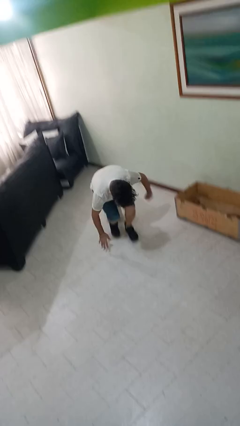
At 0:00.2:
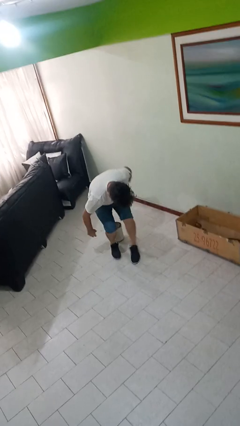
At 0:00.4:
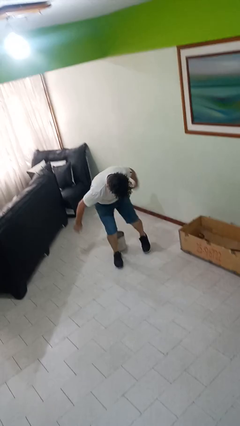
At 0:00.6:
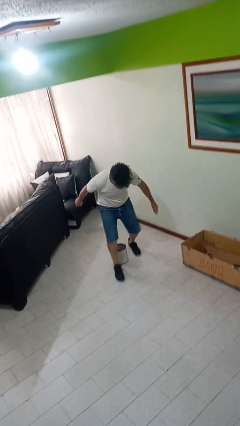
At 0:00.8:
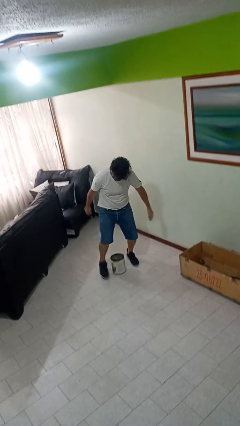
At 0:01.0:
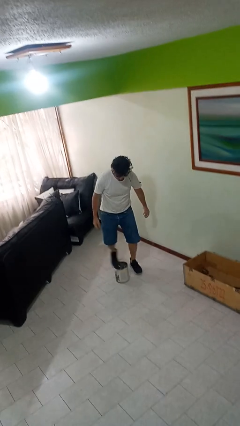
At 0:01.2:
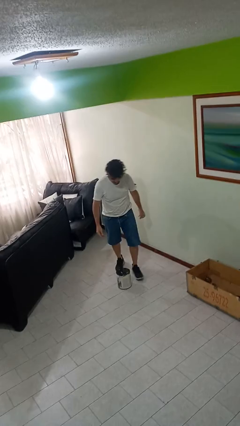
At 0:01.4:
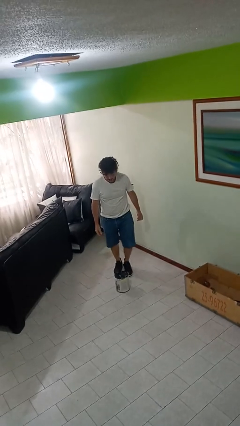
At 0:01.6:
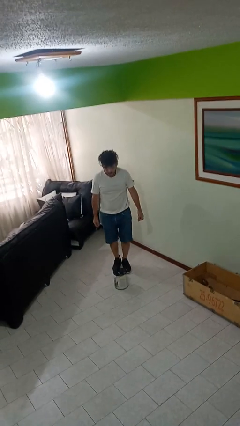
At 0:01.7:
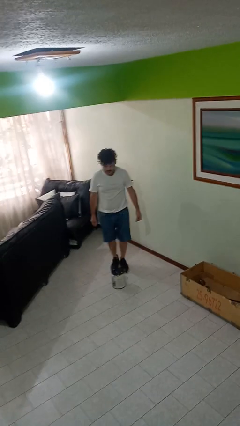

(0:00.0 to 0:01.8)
person stands up from floor

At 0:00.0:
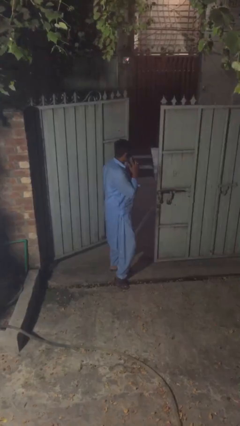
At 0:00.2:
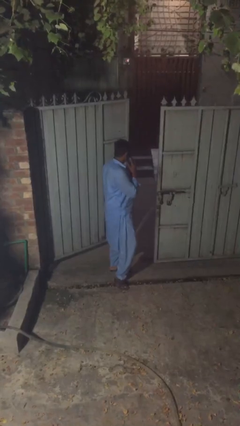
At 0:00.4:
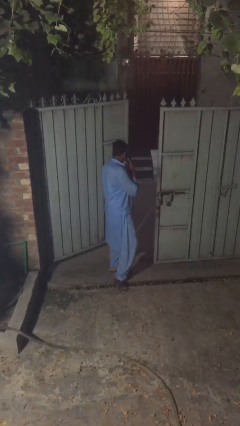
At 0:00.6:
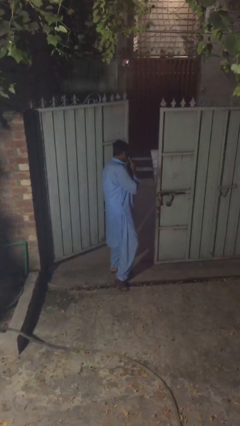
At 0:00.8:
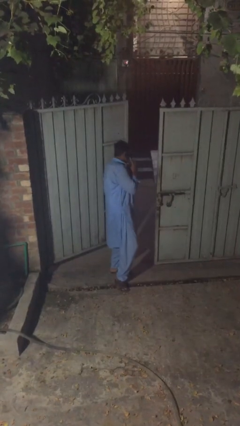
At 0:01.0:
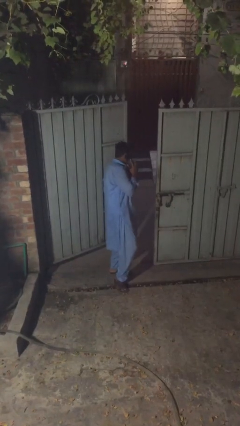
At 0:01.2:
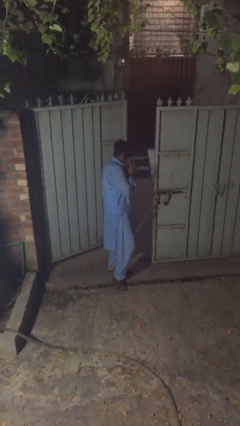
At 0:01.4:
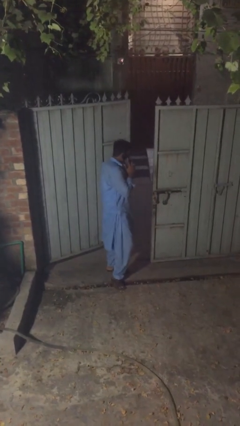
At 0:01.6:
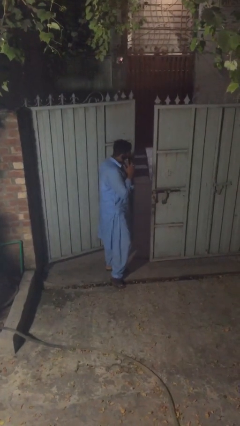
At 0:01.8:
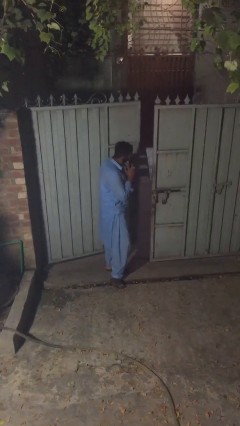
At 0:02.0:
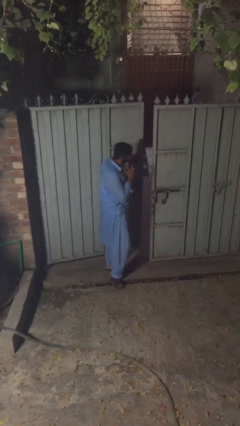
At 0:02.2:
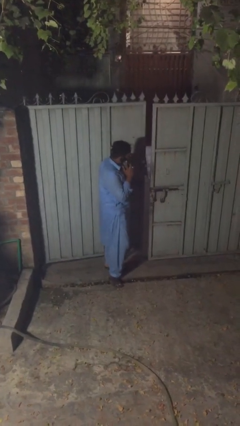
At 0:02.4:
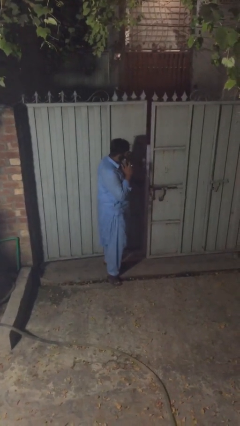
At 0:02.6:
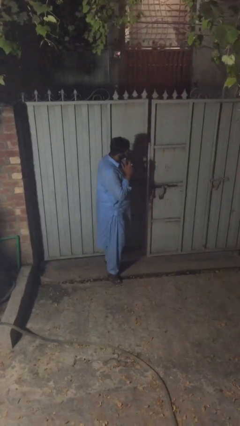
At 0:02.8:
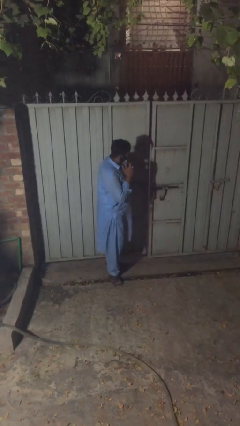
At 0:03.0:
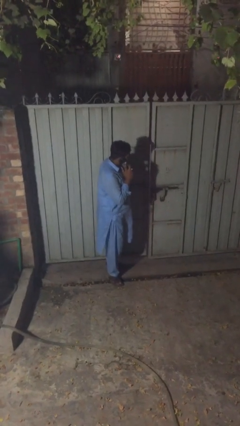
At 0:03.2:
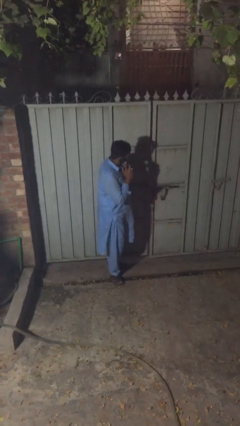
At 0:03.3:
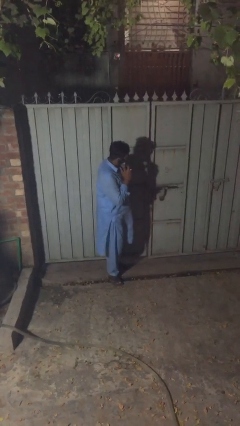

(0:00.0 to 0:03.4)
person closes facility door

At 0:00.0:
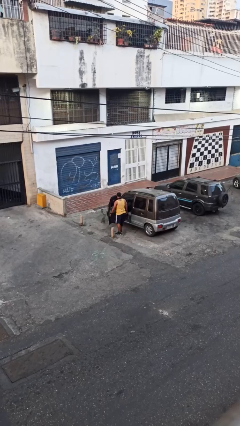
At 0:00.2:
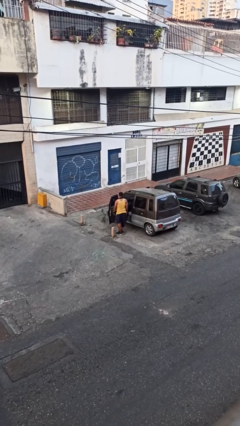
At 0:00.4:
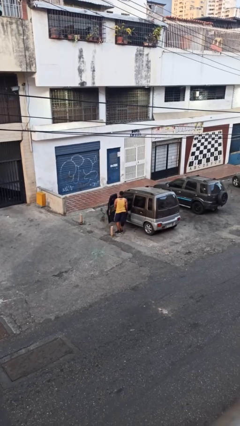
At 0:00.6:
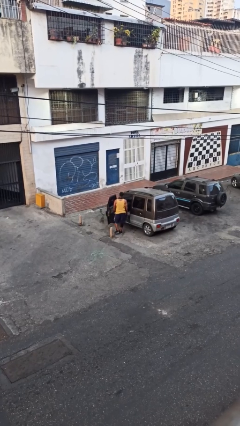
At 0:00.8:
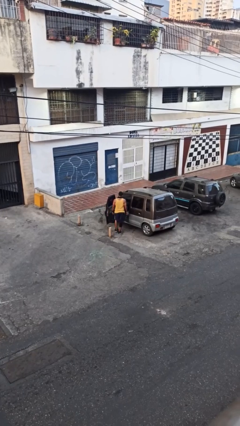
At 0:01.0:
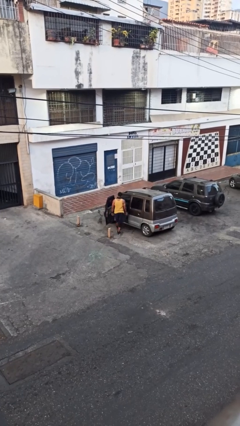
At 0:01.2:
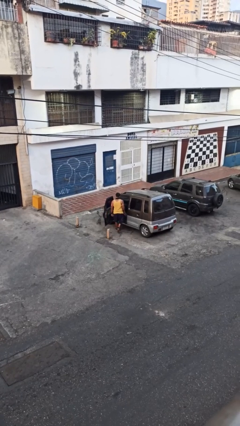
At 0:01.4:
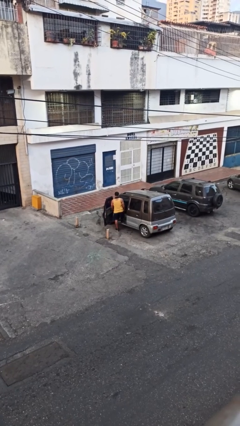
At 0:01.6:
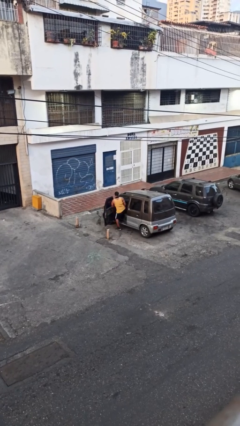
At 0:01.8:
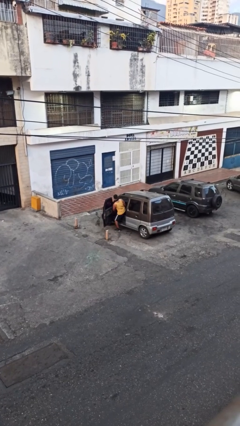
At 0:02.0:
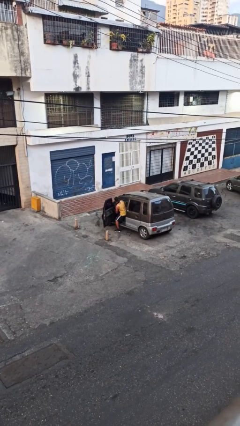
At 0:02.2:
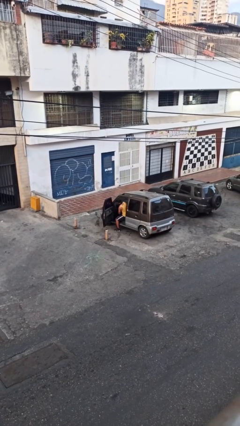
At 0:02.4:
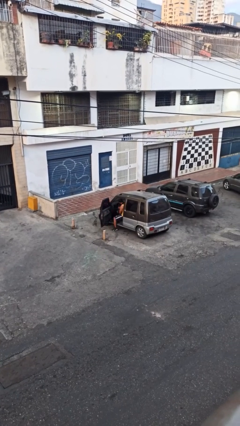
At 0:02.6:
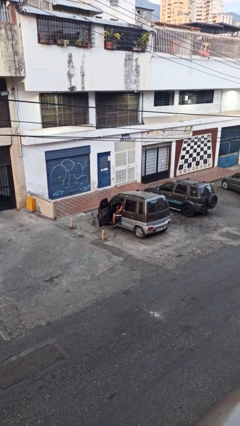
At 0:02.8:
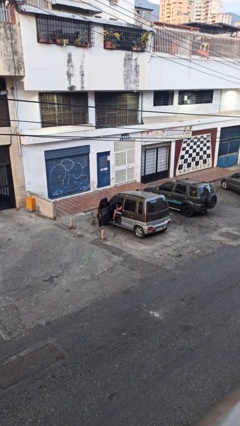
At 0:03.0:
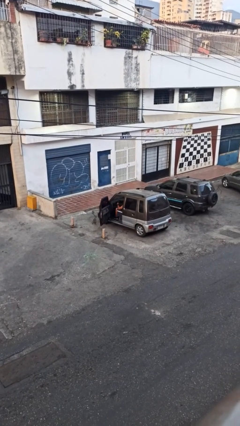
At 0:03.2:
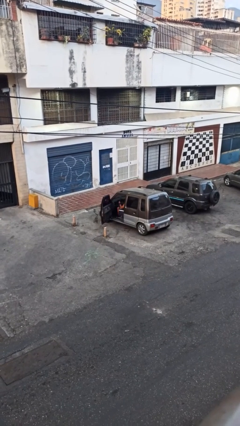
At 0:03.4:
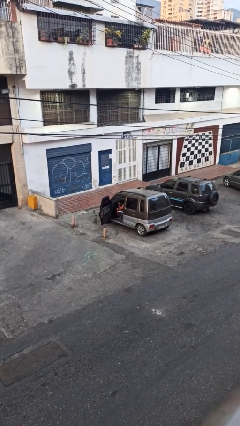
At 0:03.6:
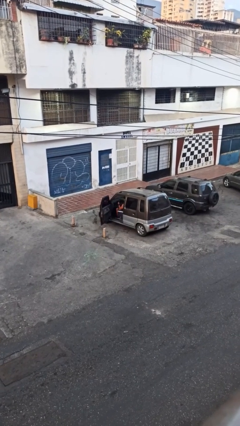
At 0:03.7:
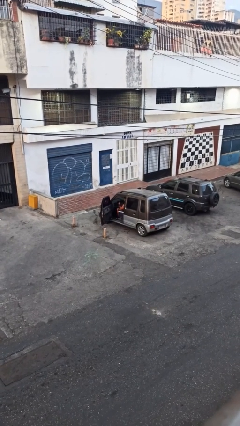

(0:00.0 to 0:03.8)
person enters car

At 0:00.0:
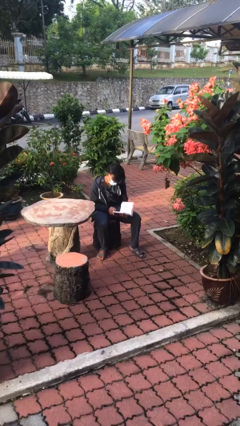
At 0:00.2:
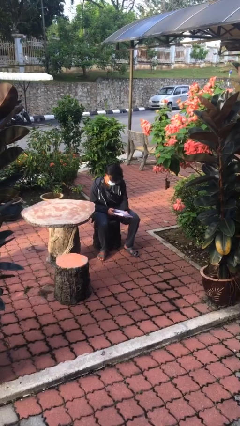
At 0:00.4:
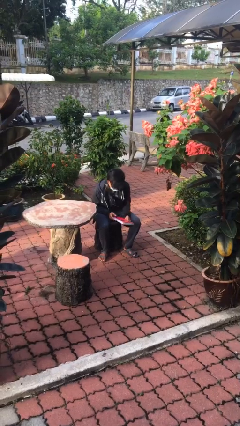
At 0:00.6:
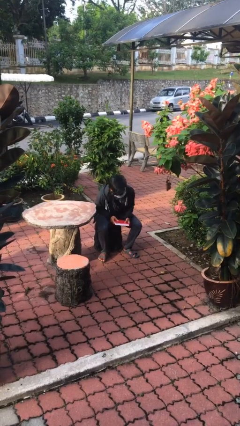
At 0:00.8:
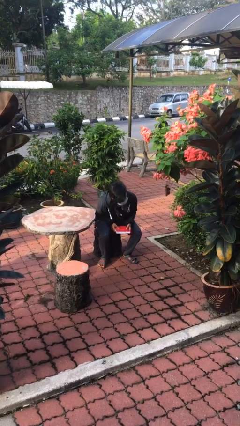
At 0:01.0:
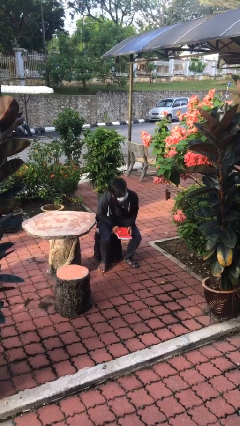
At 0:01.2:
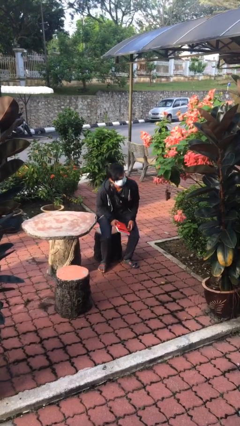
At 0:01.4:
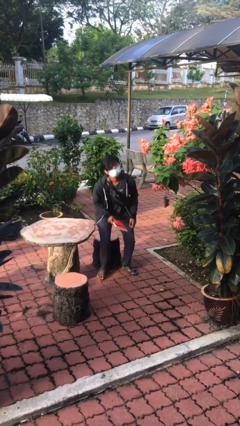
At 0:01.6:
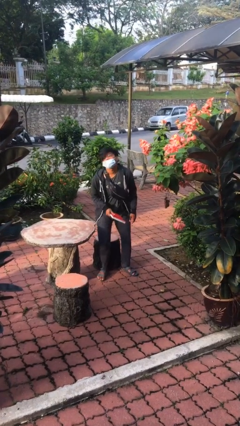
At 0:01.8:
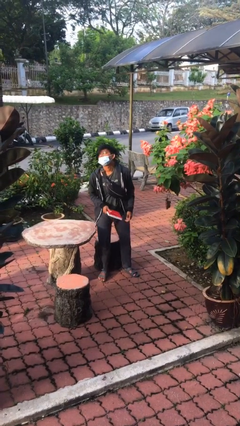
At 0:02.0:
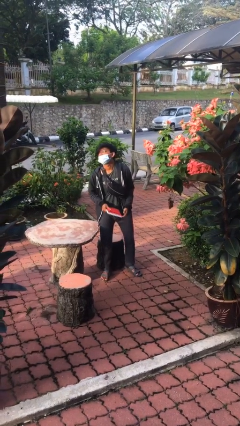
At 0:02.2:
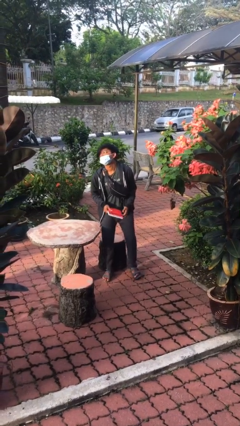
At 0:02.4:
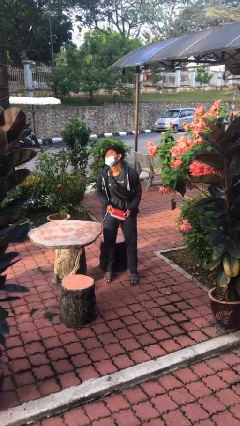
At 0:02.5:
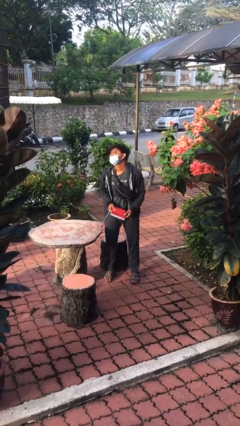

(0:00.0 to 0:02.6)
person stands up

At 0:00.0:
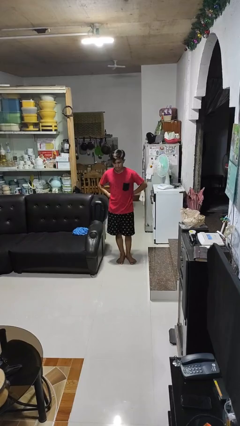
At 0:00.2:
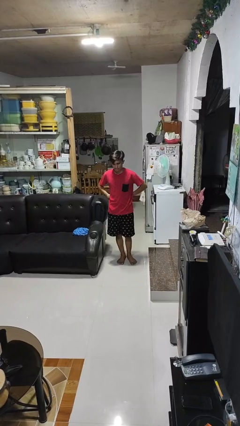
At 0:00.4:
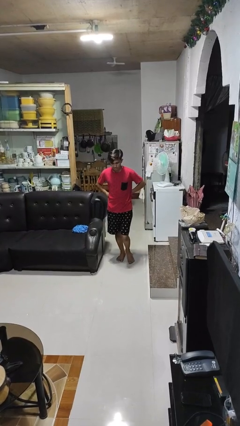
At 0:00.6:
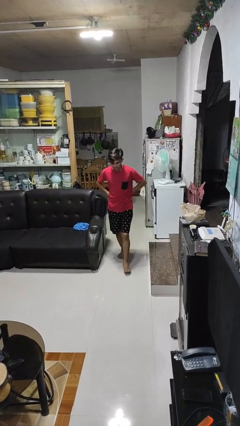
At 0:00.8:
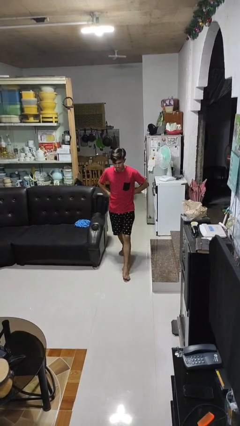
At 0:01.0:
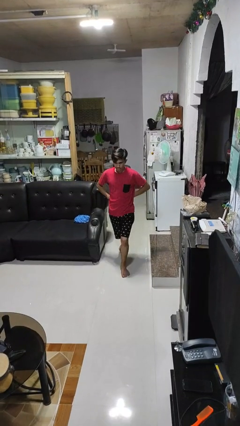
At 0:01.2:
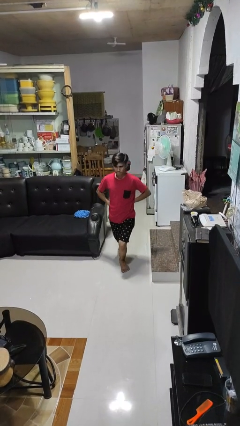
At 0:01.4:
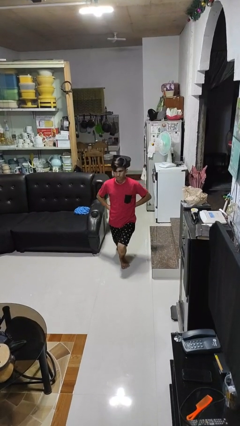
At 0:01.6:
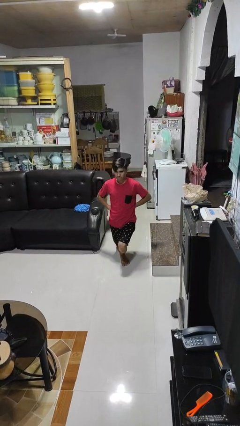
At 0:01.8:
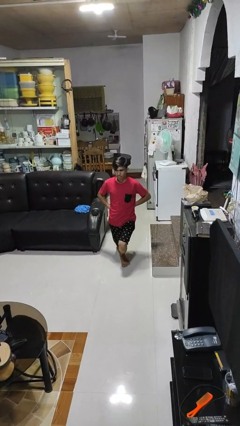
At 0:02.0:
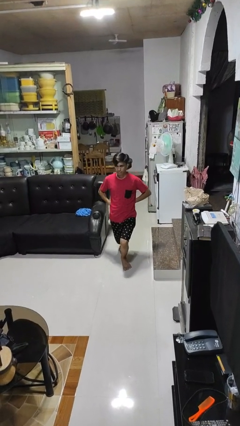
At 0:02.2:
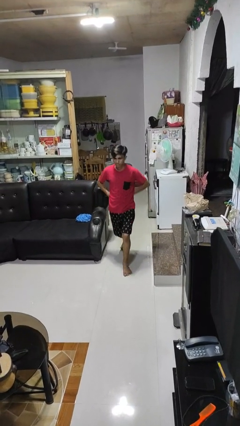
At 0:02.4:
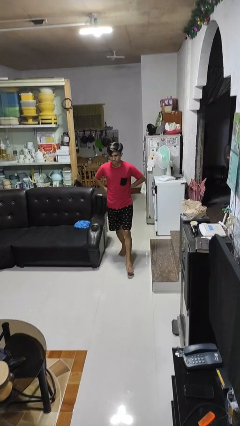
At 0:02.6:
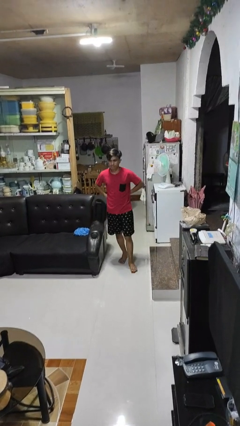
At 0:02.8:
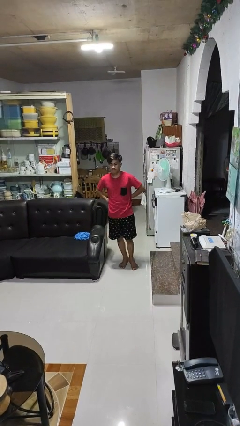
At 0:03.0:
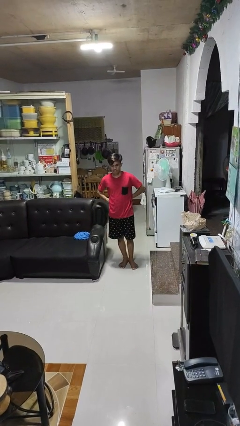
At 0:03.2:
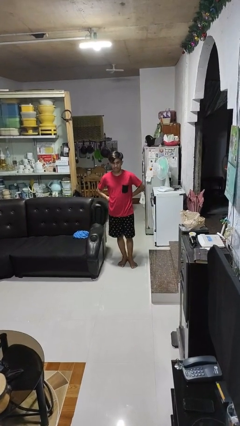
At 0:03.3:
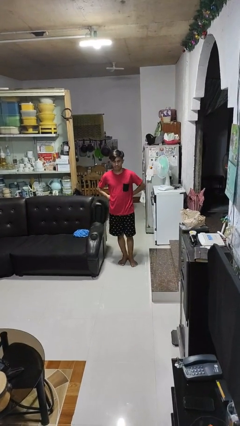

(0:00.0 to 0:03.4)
person exercises with lunges

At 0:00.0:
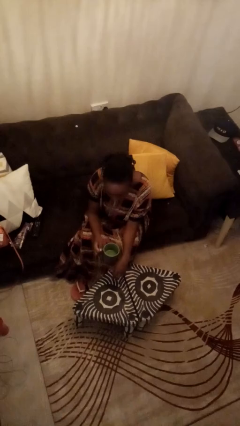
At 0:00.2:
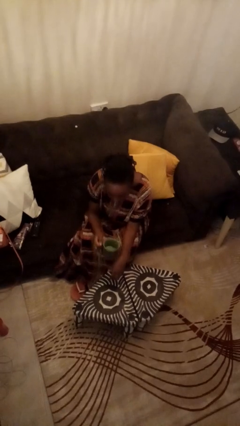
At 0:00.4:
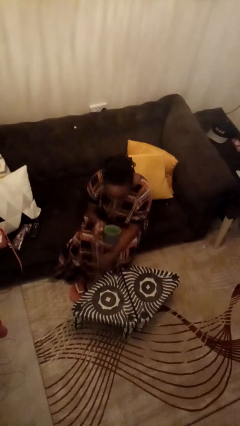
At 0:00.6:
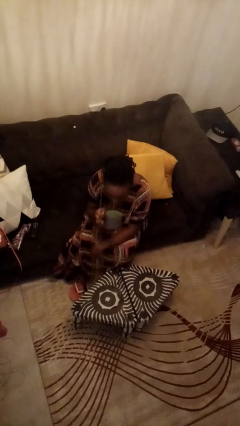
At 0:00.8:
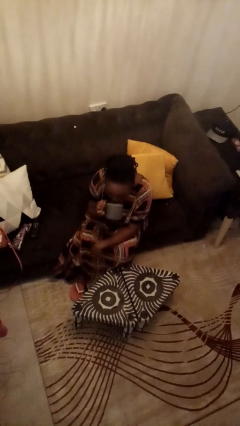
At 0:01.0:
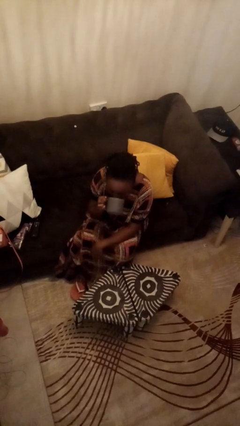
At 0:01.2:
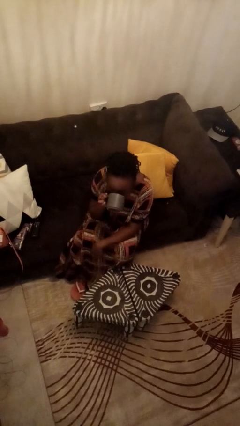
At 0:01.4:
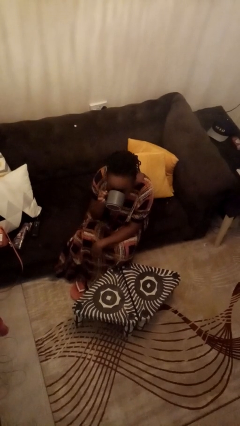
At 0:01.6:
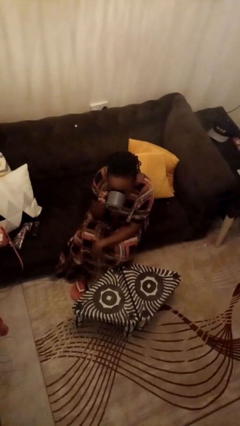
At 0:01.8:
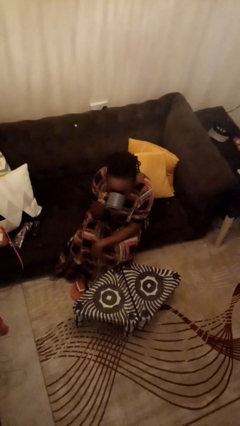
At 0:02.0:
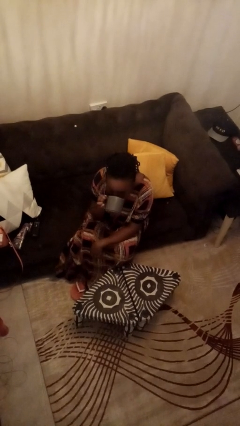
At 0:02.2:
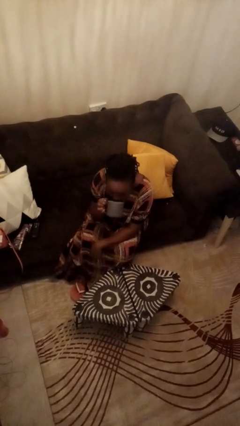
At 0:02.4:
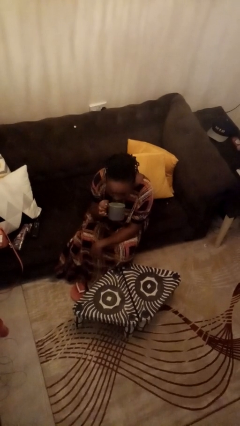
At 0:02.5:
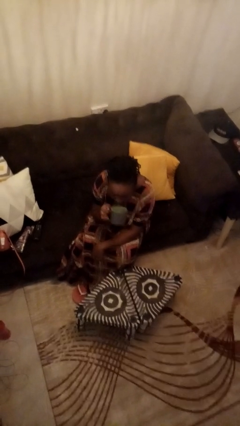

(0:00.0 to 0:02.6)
person drinks from mug
